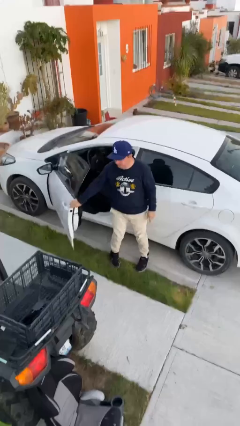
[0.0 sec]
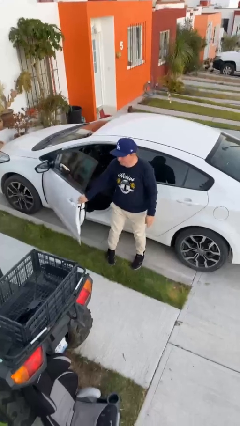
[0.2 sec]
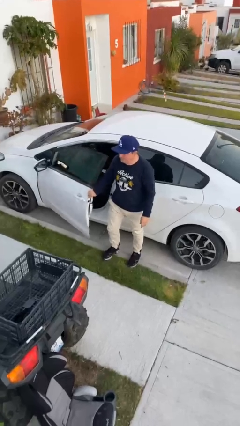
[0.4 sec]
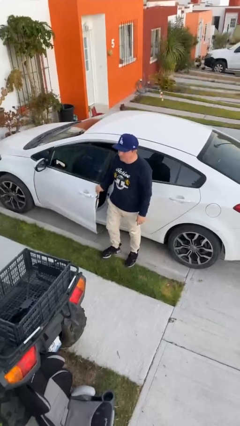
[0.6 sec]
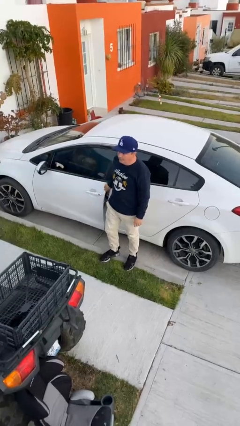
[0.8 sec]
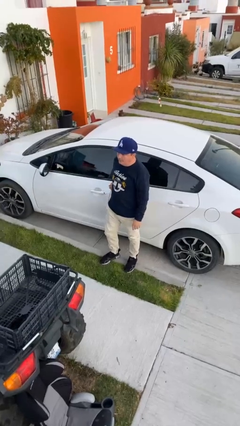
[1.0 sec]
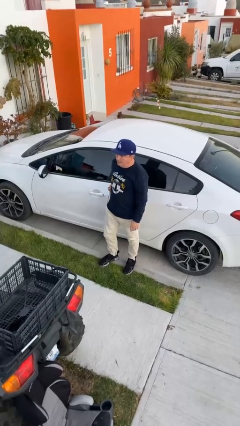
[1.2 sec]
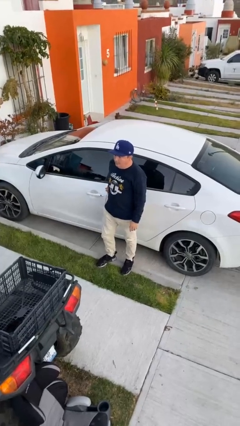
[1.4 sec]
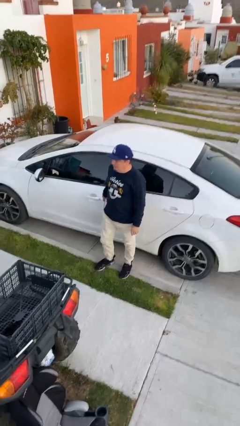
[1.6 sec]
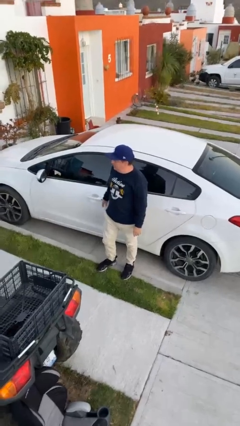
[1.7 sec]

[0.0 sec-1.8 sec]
person closes car door

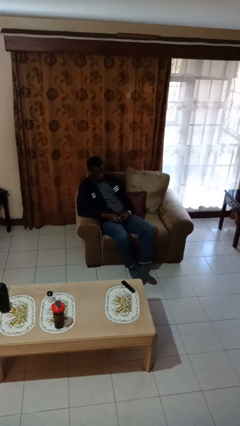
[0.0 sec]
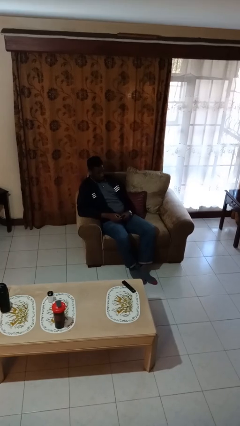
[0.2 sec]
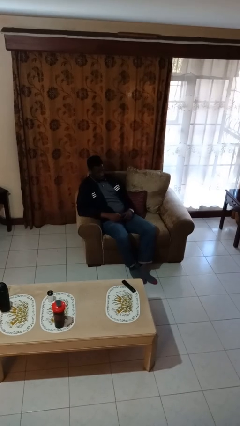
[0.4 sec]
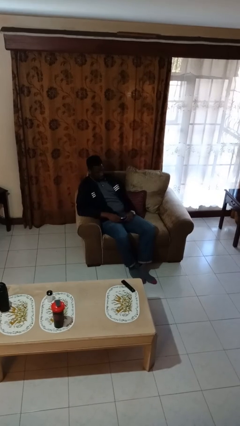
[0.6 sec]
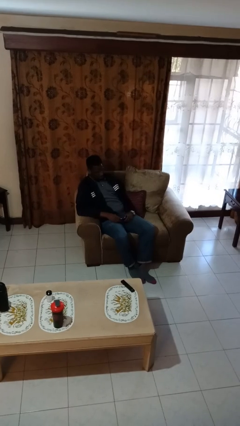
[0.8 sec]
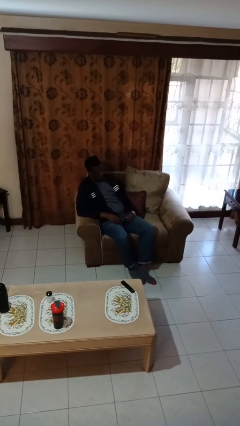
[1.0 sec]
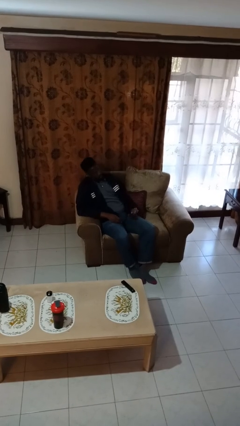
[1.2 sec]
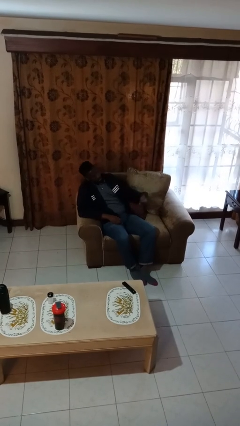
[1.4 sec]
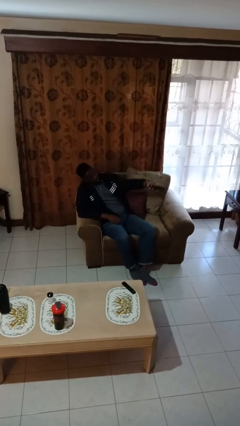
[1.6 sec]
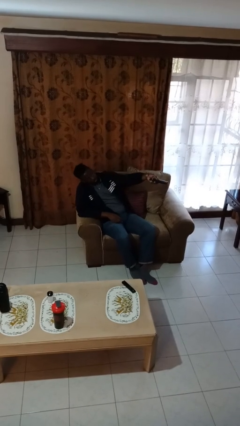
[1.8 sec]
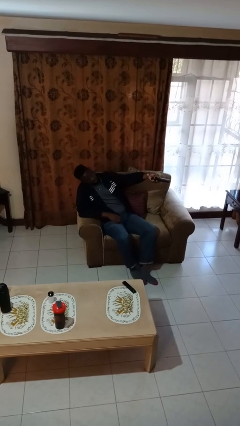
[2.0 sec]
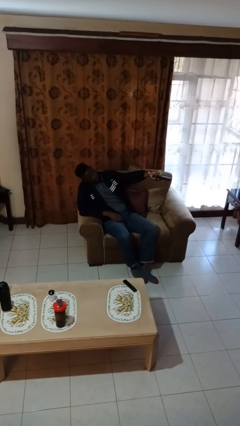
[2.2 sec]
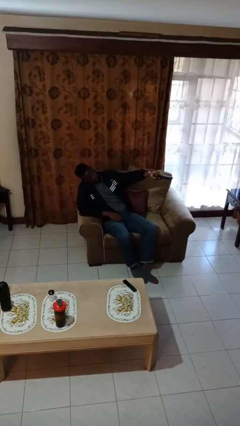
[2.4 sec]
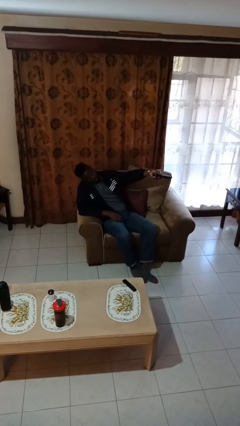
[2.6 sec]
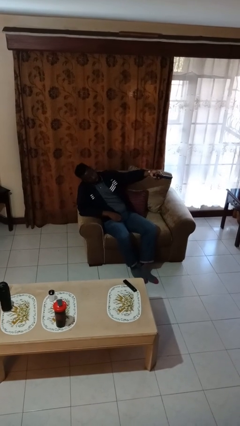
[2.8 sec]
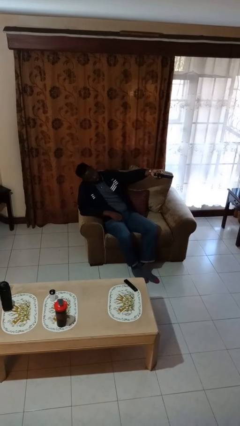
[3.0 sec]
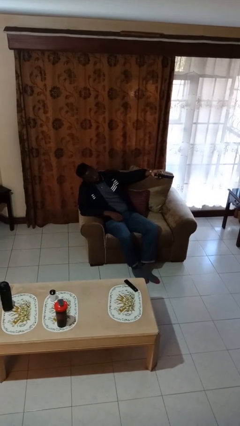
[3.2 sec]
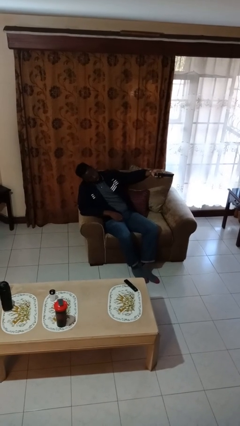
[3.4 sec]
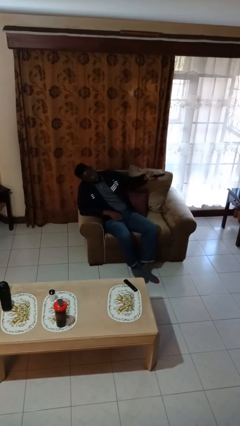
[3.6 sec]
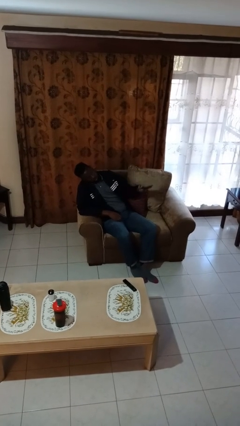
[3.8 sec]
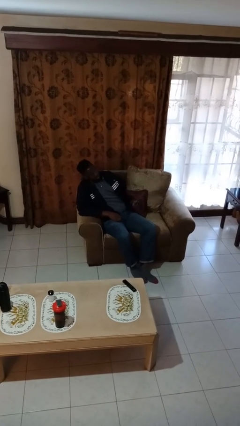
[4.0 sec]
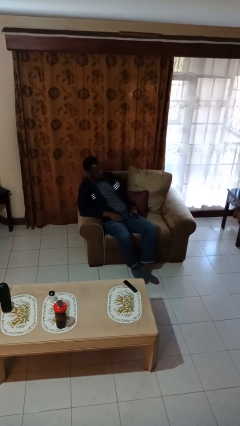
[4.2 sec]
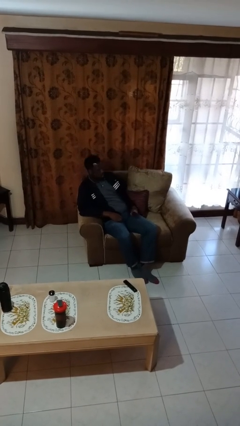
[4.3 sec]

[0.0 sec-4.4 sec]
person uses television remote

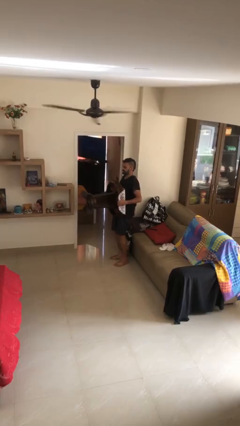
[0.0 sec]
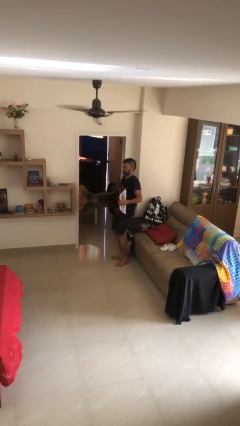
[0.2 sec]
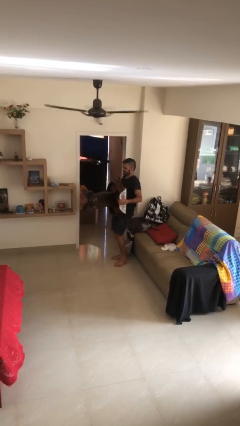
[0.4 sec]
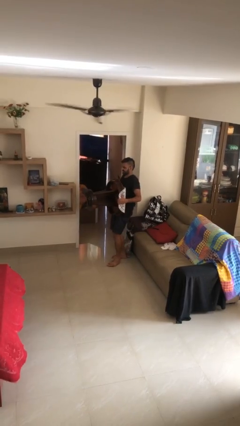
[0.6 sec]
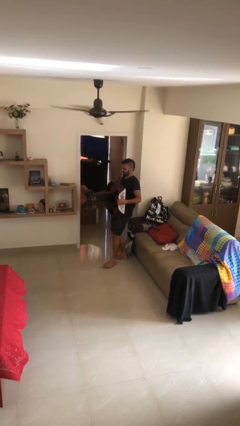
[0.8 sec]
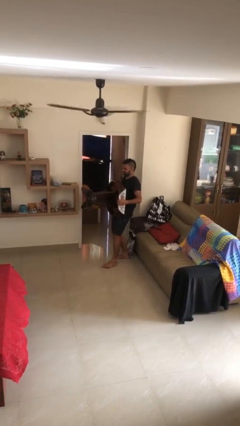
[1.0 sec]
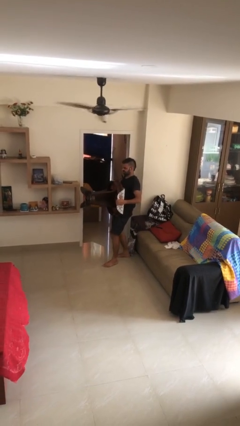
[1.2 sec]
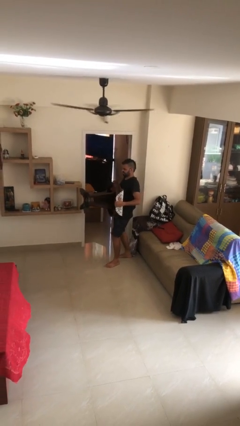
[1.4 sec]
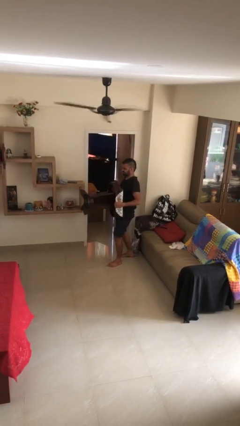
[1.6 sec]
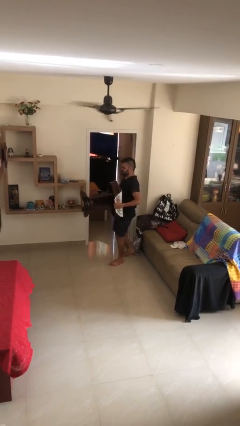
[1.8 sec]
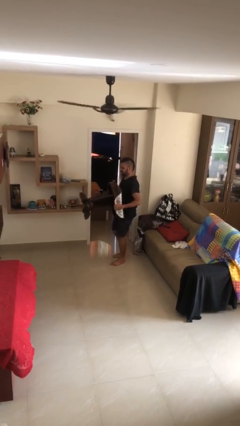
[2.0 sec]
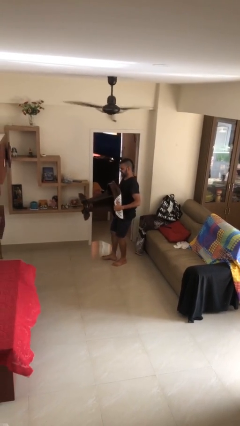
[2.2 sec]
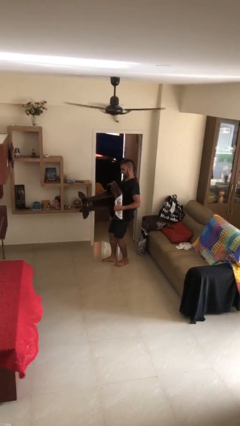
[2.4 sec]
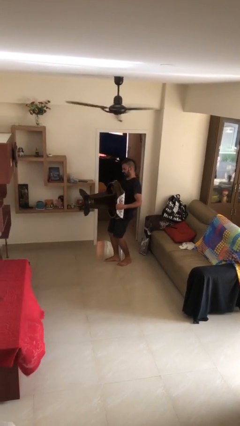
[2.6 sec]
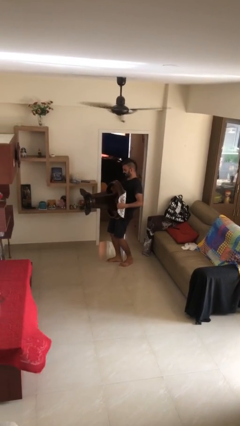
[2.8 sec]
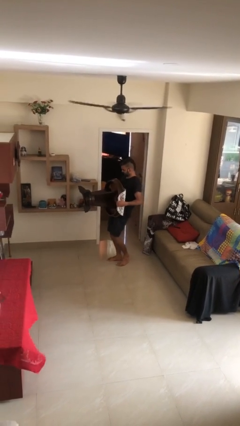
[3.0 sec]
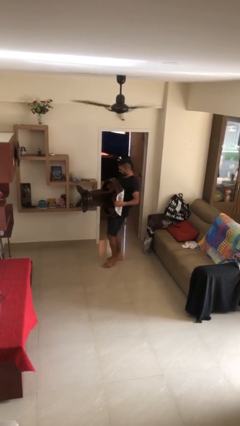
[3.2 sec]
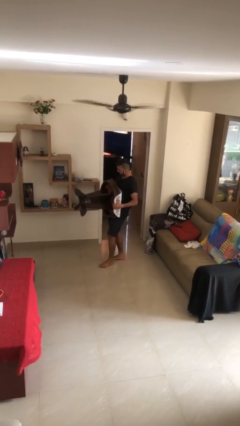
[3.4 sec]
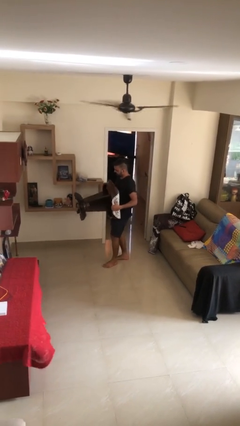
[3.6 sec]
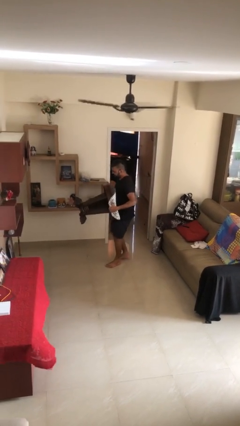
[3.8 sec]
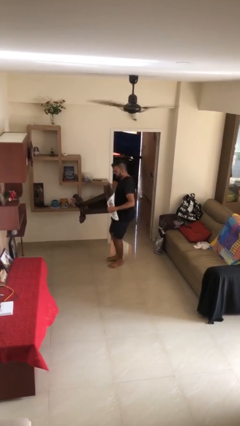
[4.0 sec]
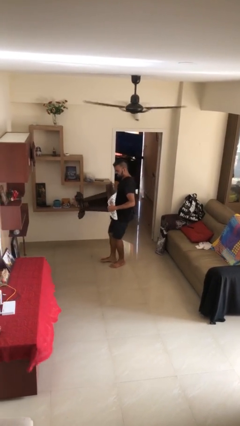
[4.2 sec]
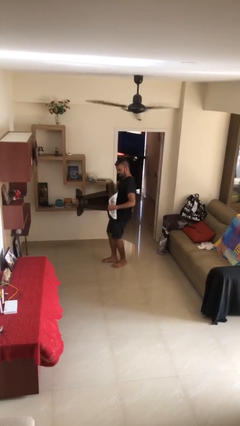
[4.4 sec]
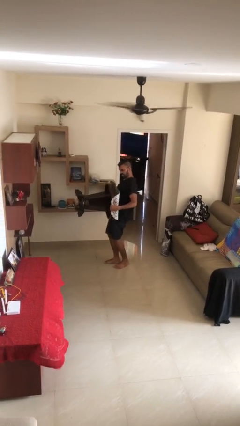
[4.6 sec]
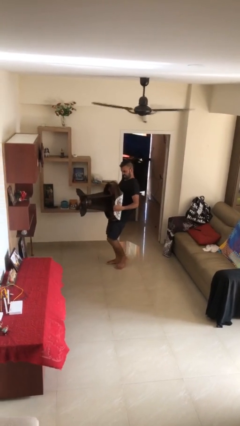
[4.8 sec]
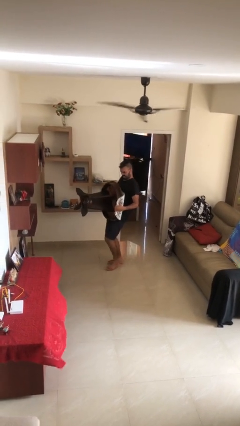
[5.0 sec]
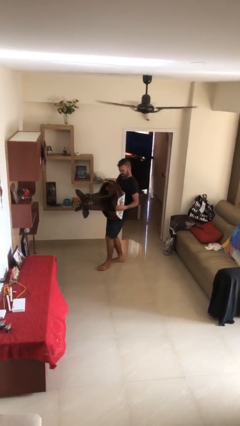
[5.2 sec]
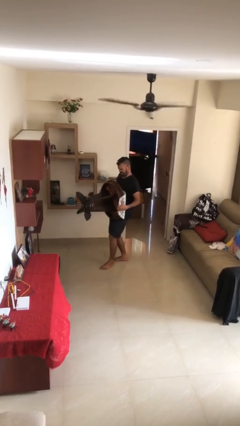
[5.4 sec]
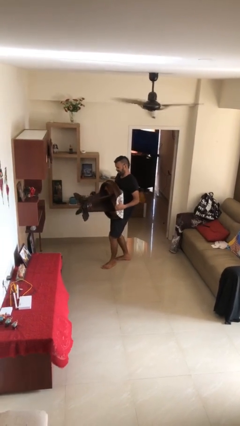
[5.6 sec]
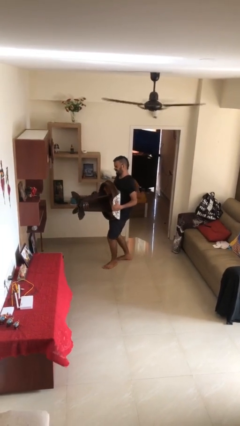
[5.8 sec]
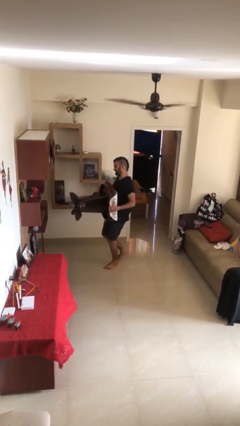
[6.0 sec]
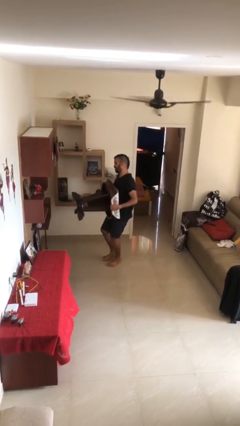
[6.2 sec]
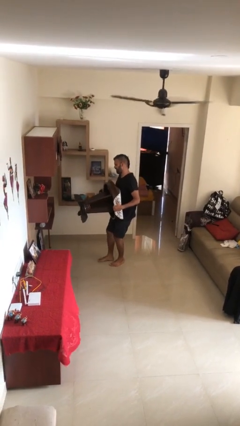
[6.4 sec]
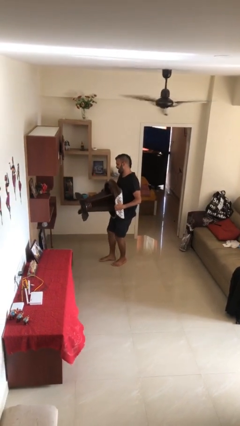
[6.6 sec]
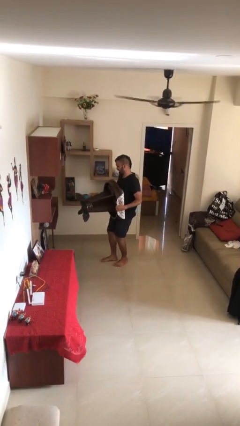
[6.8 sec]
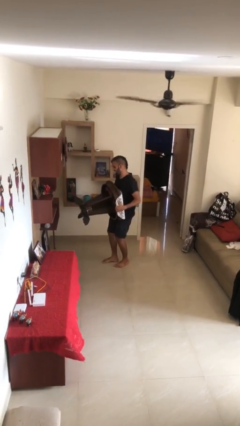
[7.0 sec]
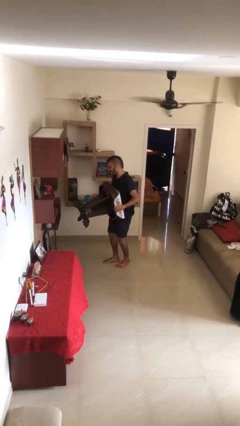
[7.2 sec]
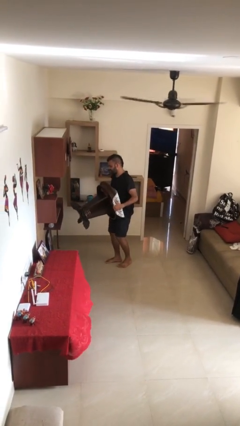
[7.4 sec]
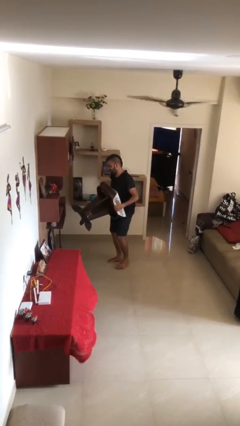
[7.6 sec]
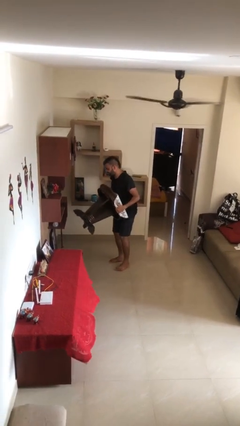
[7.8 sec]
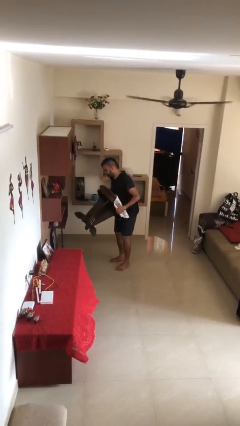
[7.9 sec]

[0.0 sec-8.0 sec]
person carries heavy object

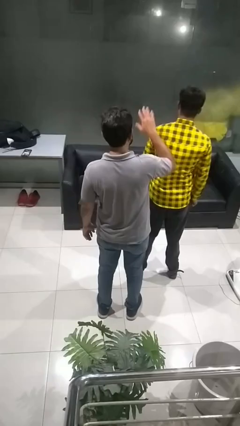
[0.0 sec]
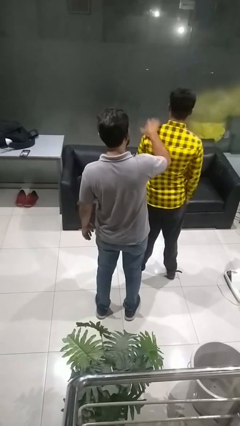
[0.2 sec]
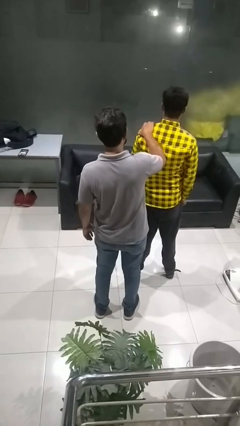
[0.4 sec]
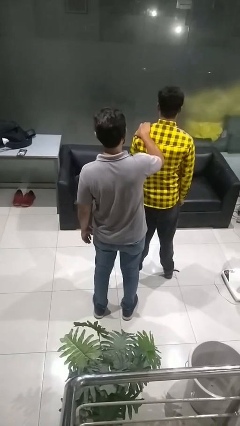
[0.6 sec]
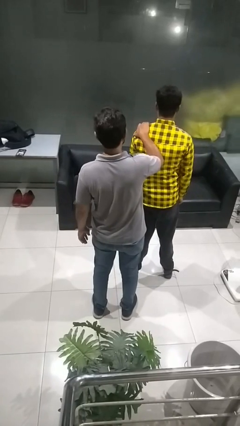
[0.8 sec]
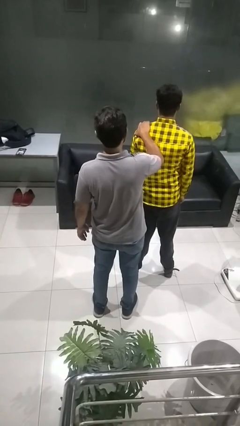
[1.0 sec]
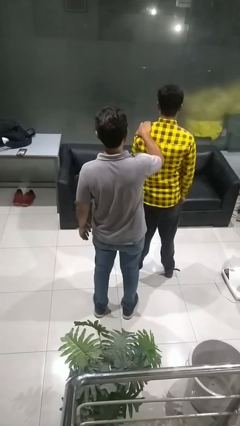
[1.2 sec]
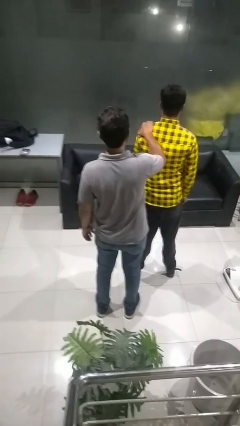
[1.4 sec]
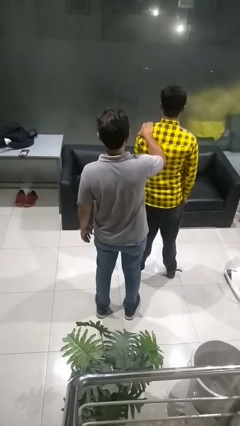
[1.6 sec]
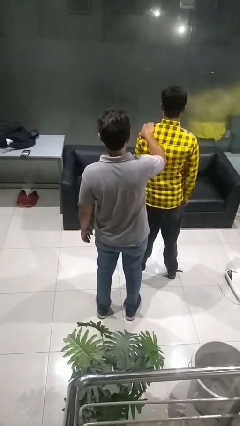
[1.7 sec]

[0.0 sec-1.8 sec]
person grabs person by shoulder

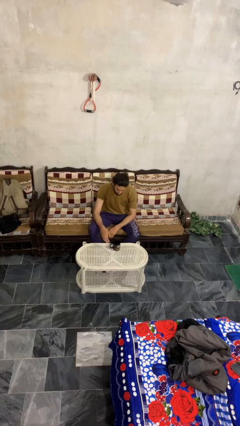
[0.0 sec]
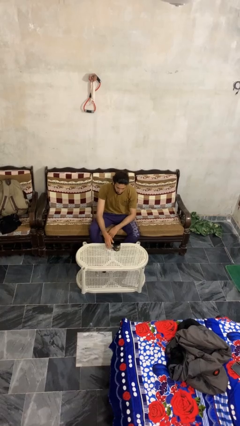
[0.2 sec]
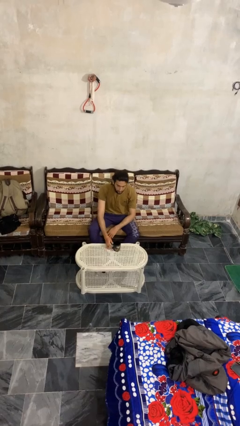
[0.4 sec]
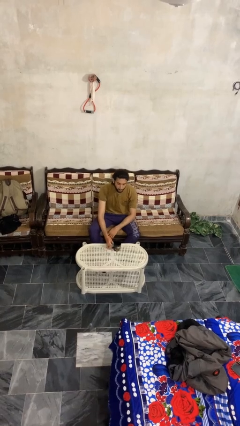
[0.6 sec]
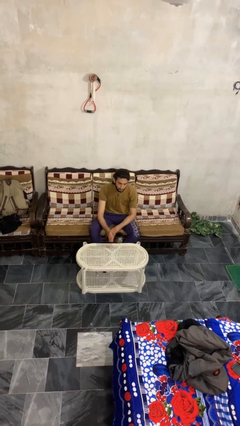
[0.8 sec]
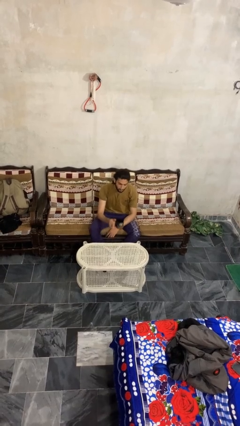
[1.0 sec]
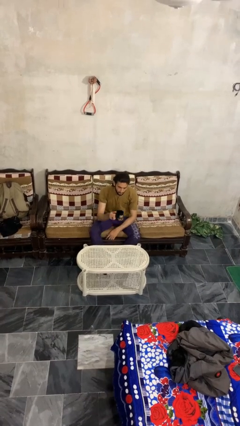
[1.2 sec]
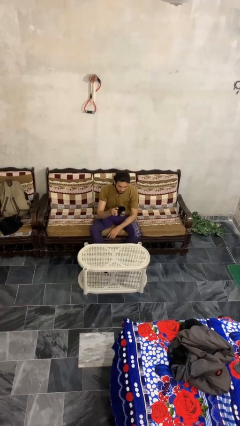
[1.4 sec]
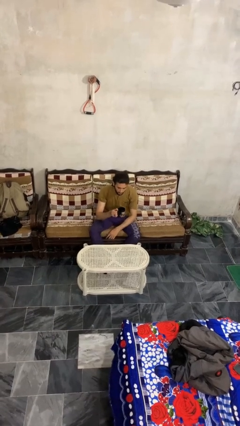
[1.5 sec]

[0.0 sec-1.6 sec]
person picks up object from table
